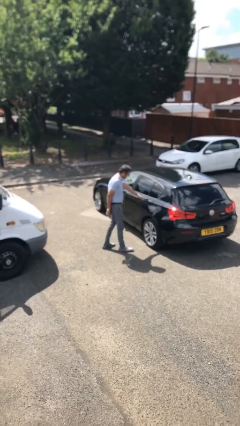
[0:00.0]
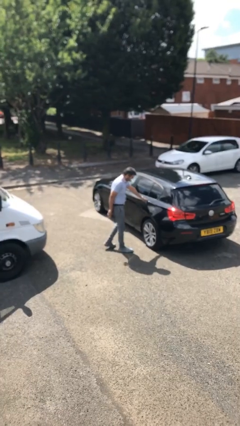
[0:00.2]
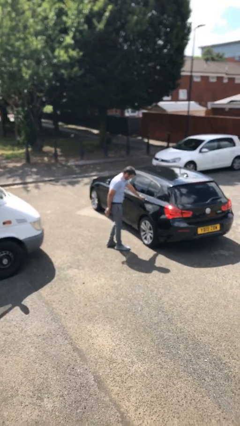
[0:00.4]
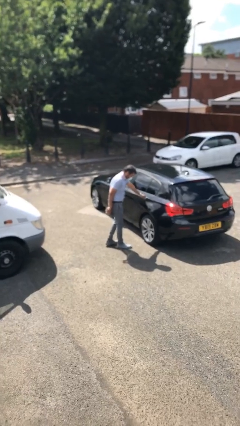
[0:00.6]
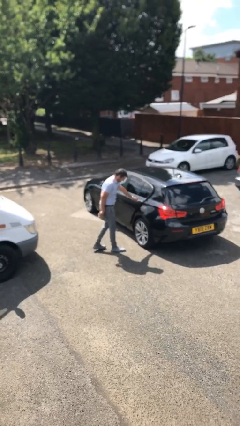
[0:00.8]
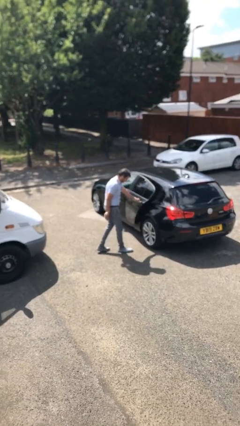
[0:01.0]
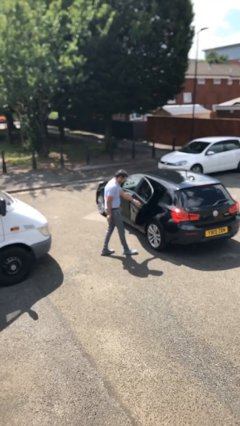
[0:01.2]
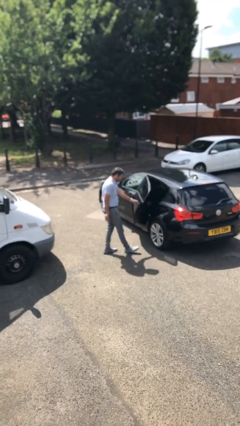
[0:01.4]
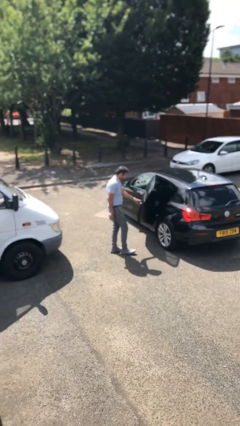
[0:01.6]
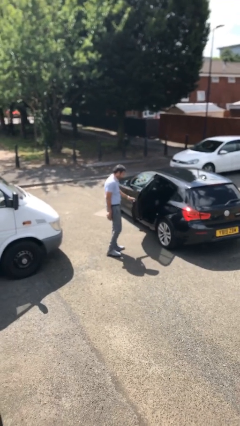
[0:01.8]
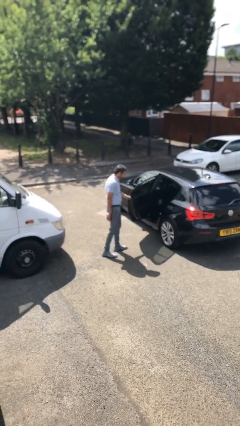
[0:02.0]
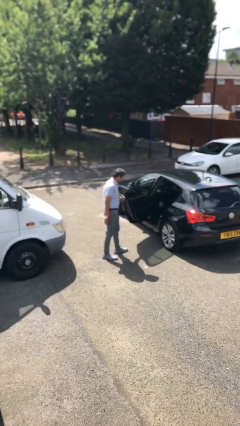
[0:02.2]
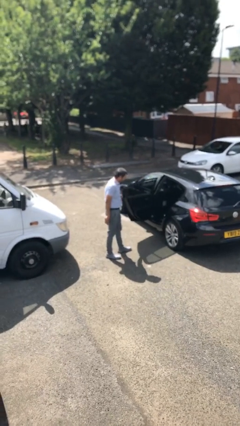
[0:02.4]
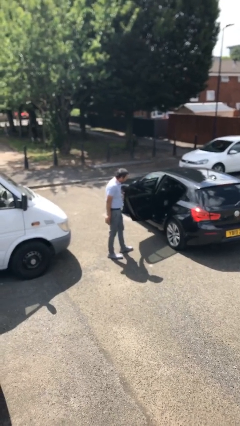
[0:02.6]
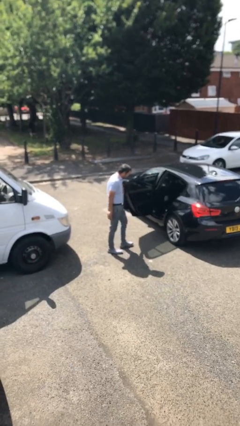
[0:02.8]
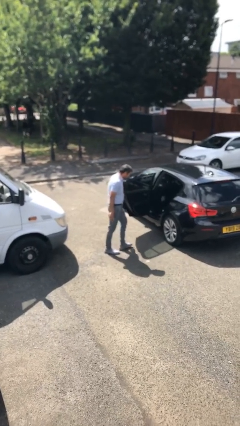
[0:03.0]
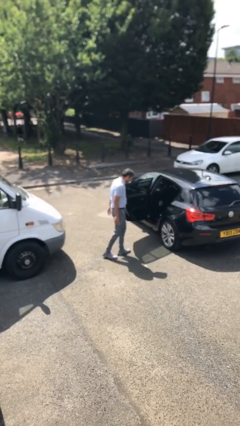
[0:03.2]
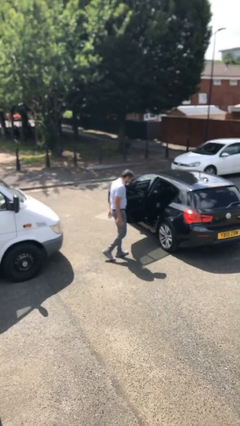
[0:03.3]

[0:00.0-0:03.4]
person opens car door

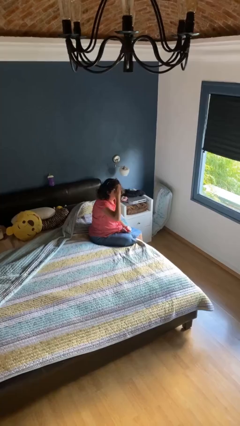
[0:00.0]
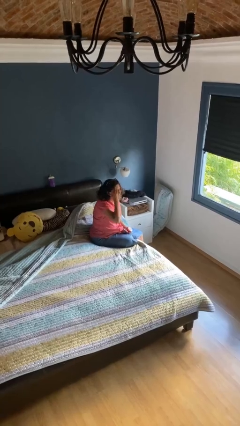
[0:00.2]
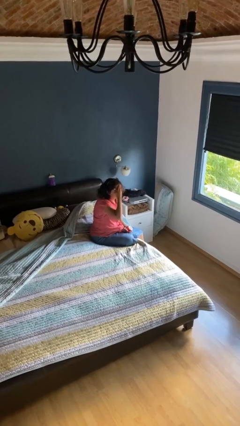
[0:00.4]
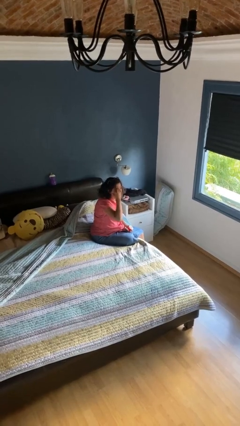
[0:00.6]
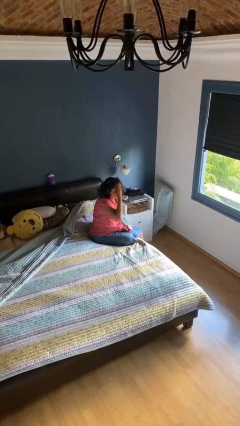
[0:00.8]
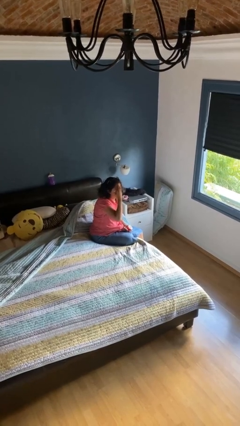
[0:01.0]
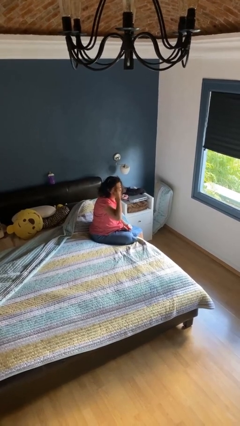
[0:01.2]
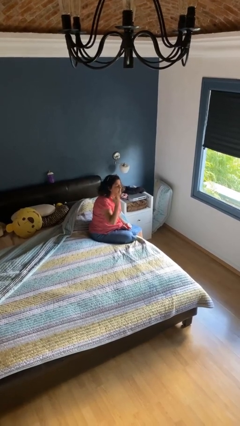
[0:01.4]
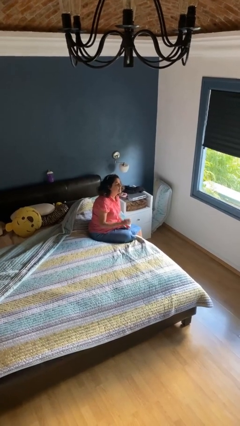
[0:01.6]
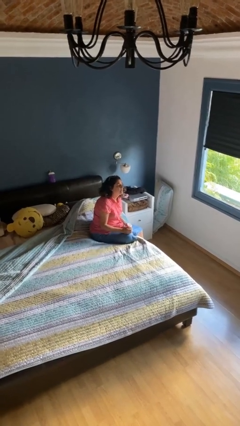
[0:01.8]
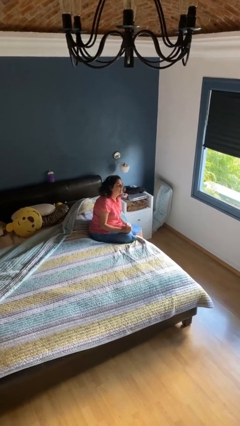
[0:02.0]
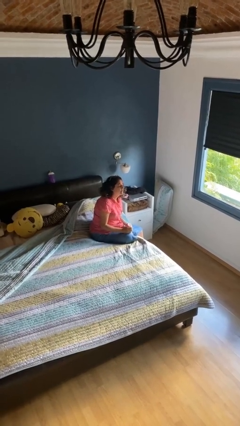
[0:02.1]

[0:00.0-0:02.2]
person applies facial moisturizer

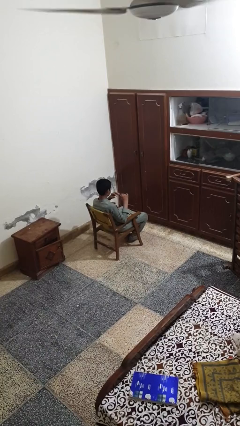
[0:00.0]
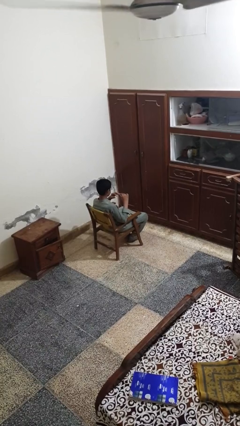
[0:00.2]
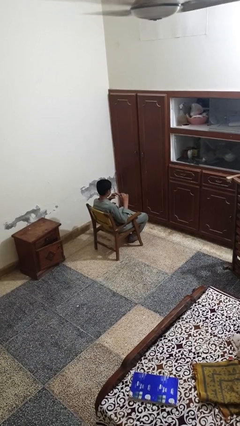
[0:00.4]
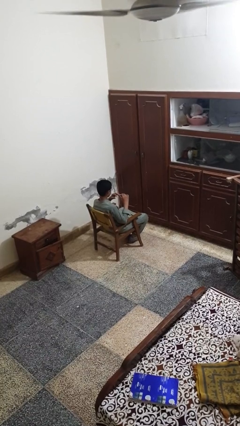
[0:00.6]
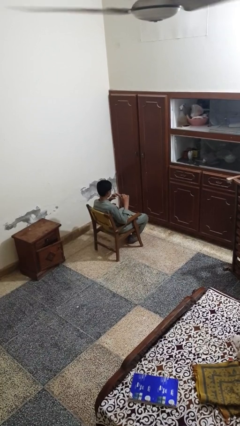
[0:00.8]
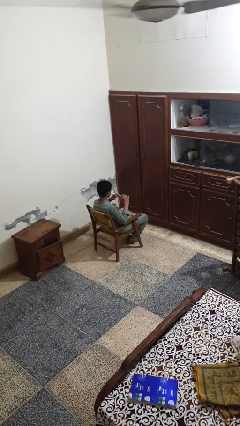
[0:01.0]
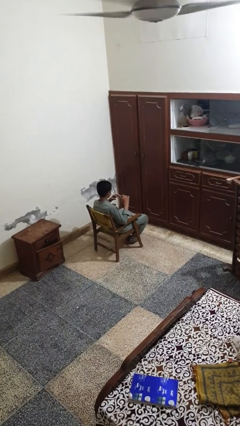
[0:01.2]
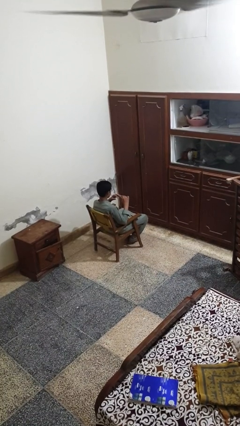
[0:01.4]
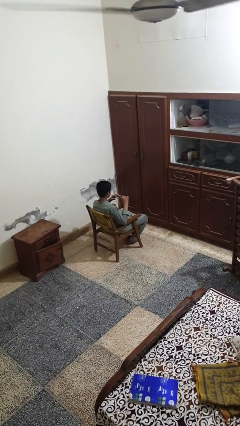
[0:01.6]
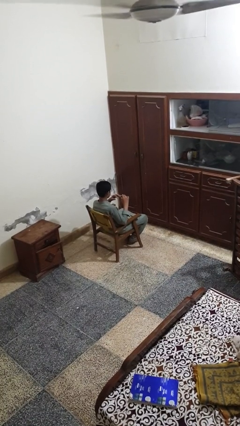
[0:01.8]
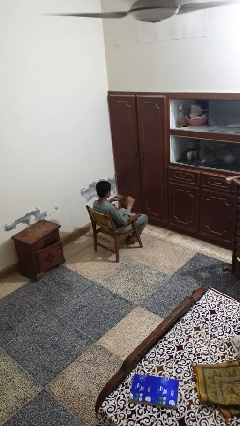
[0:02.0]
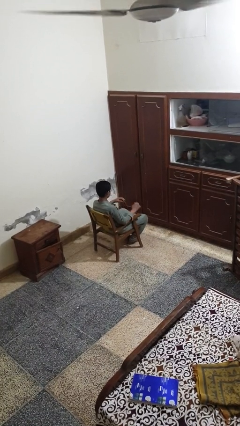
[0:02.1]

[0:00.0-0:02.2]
person clips fingernails

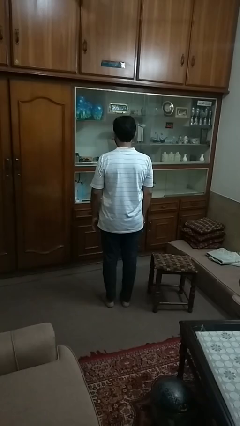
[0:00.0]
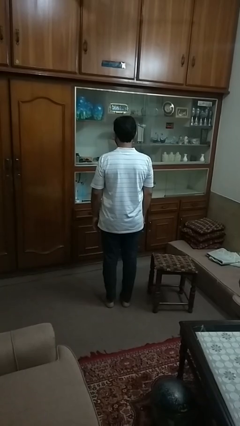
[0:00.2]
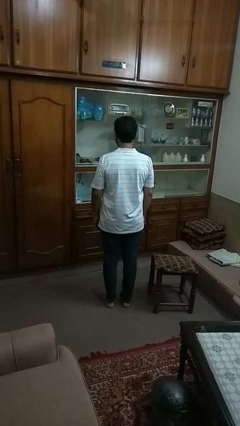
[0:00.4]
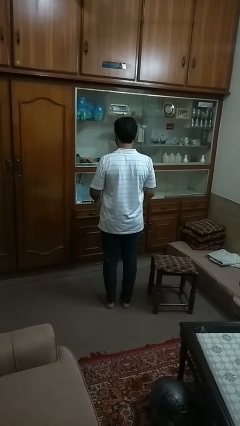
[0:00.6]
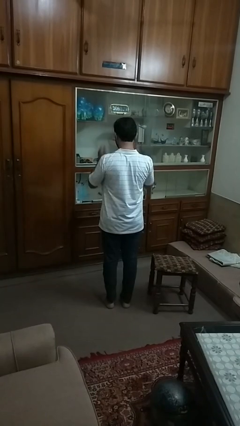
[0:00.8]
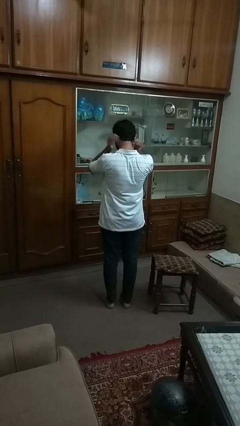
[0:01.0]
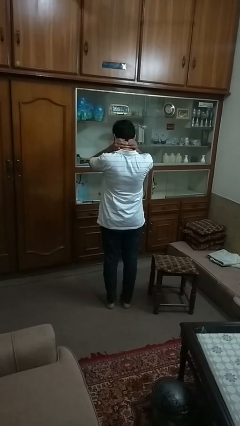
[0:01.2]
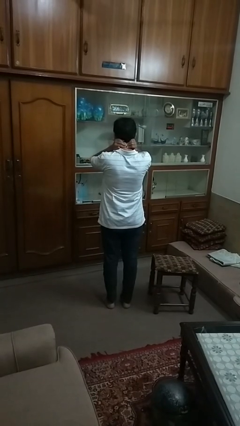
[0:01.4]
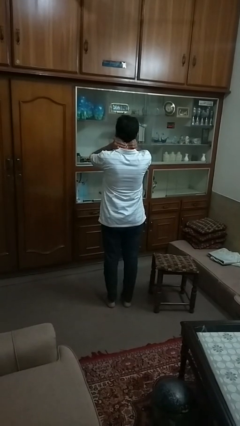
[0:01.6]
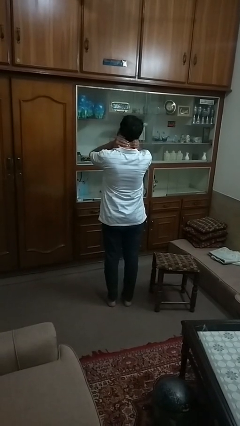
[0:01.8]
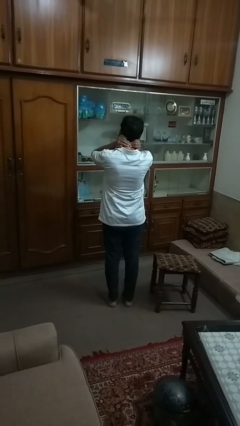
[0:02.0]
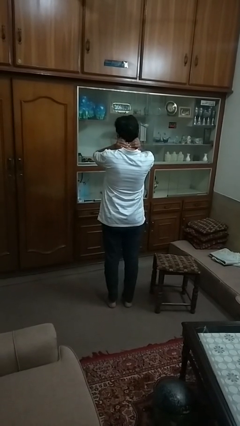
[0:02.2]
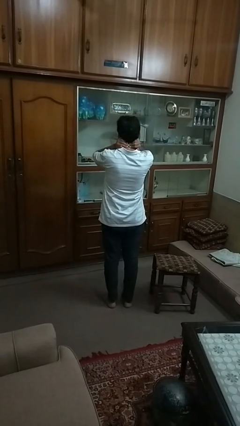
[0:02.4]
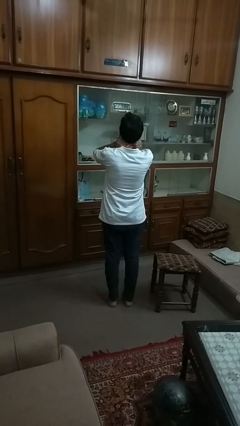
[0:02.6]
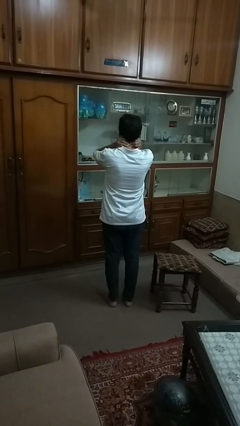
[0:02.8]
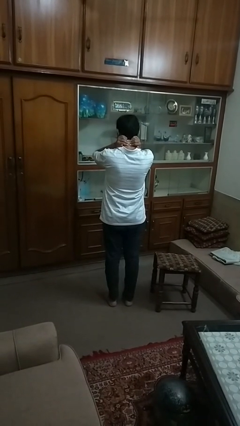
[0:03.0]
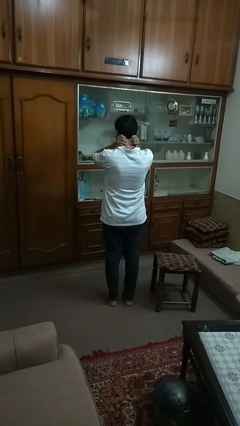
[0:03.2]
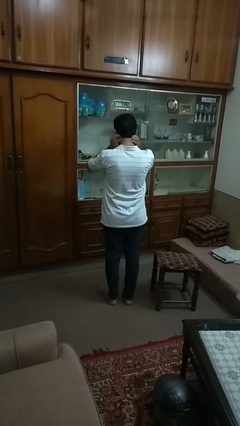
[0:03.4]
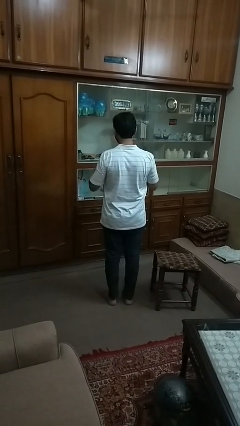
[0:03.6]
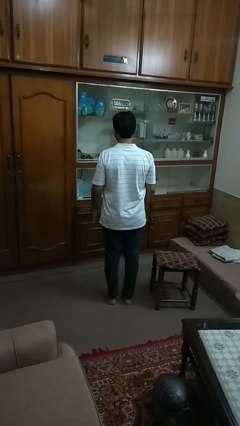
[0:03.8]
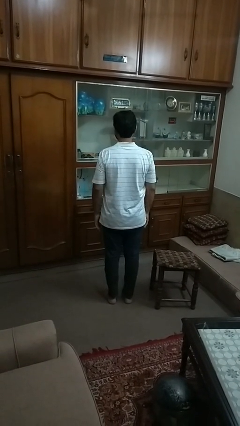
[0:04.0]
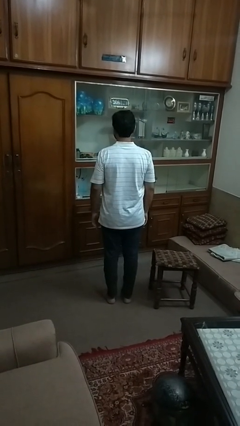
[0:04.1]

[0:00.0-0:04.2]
person rubs neck

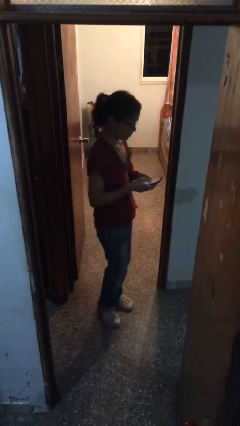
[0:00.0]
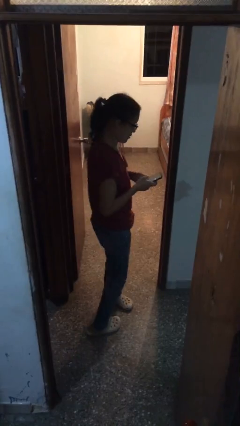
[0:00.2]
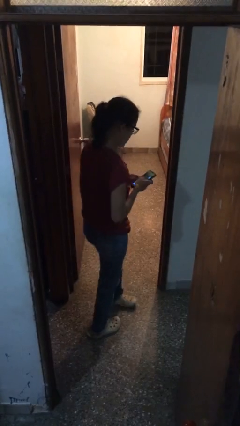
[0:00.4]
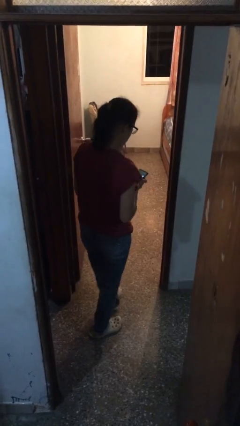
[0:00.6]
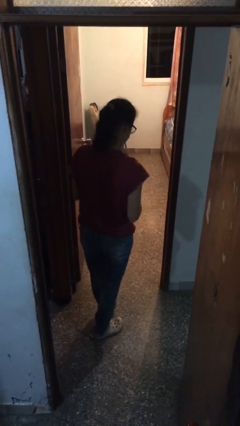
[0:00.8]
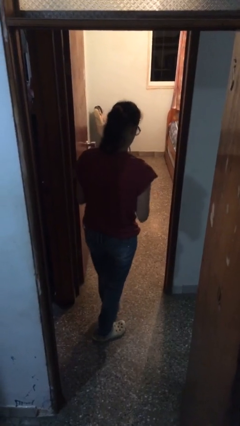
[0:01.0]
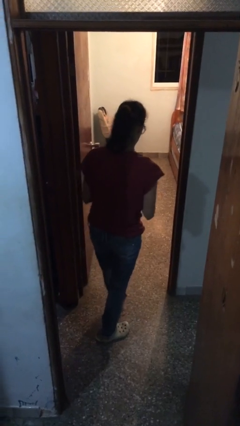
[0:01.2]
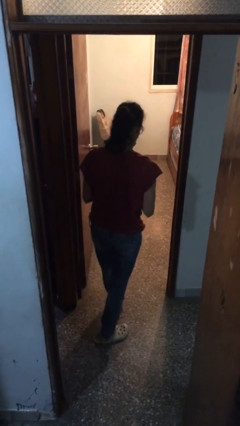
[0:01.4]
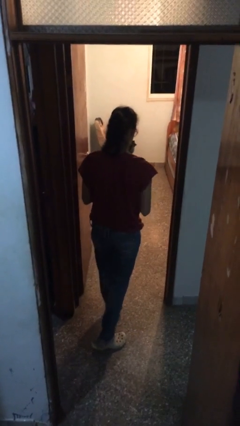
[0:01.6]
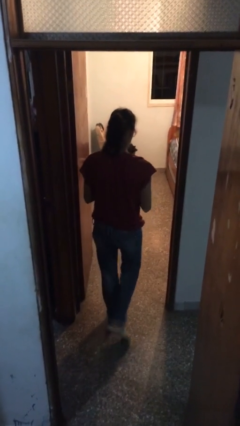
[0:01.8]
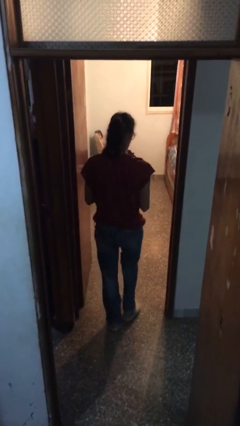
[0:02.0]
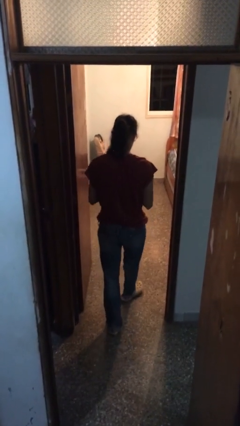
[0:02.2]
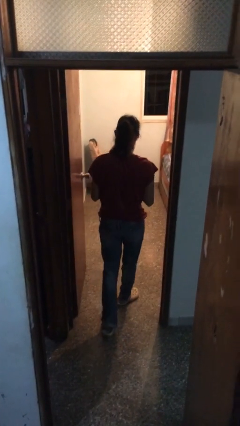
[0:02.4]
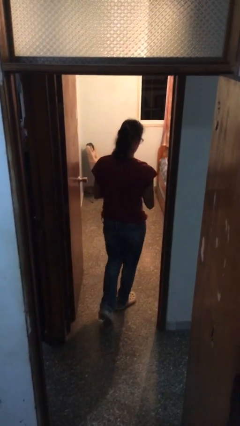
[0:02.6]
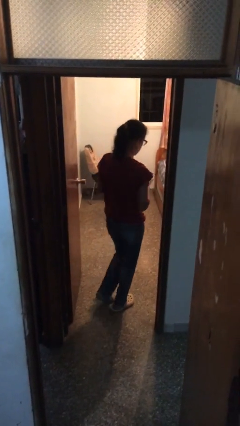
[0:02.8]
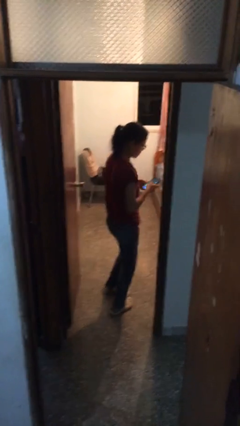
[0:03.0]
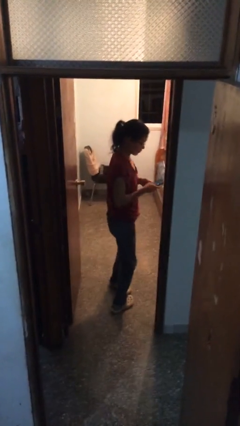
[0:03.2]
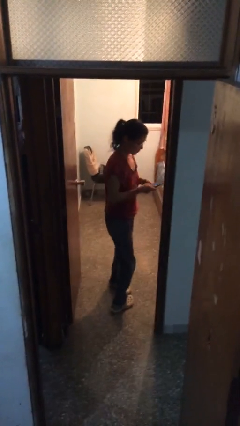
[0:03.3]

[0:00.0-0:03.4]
person exits scene through structure

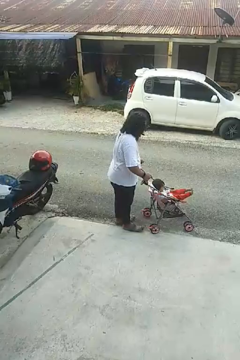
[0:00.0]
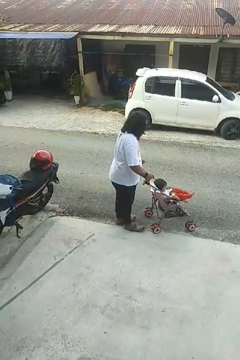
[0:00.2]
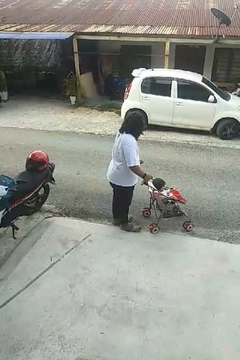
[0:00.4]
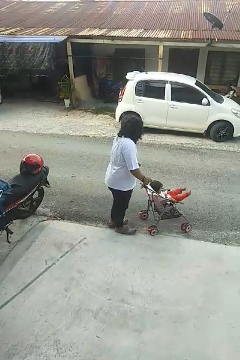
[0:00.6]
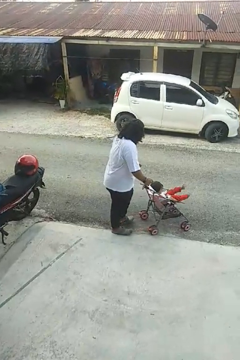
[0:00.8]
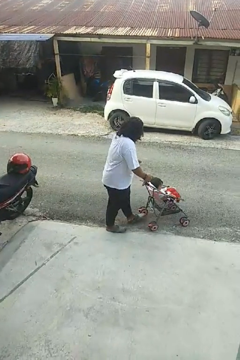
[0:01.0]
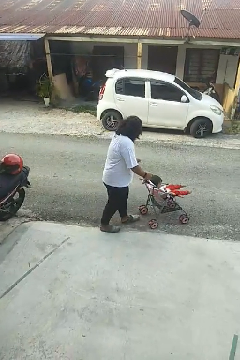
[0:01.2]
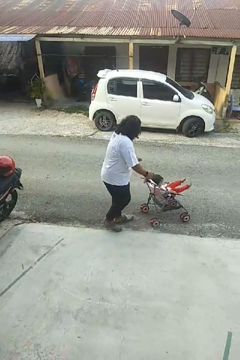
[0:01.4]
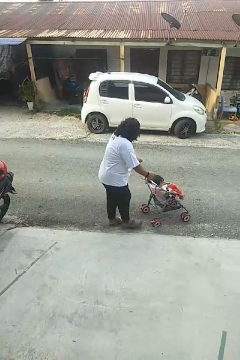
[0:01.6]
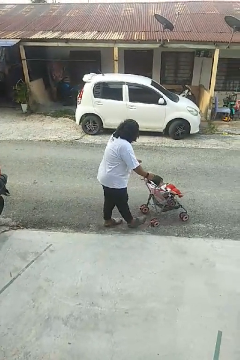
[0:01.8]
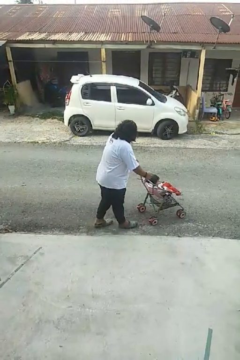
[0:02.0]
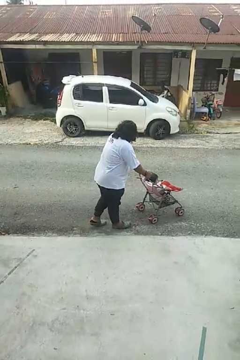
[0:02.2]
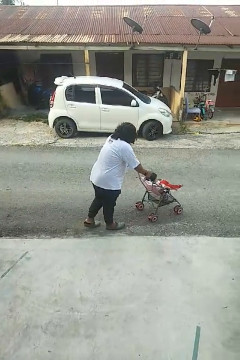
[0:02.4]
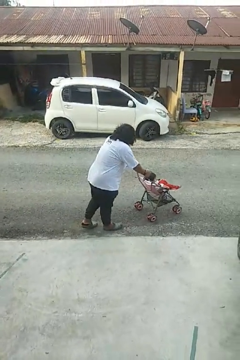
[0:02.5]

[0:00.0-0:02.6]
person pushes wheeled cart
